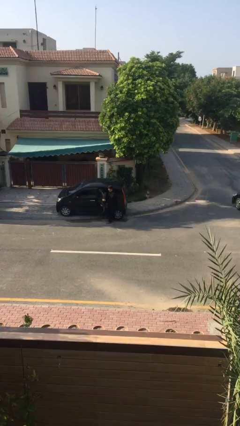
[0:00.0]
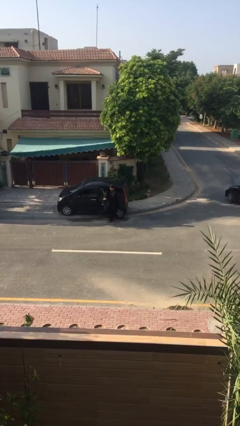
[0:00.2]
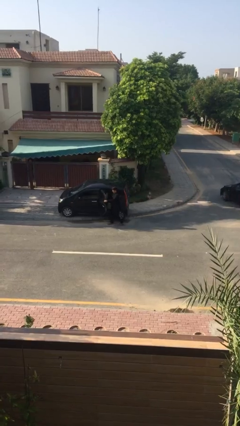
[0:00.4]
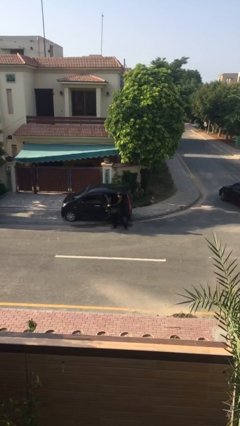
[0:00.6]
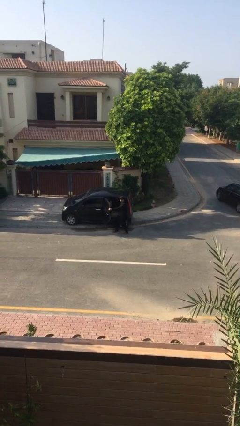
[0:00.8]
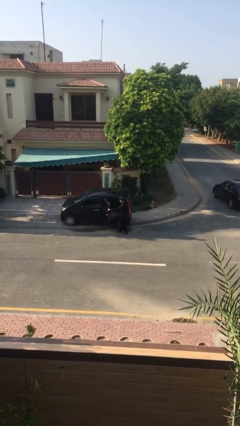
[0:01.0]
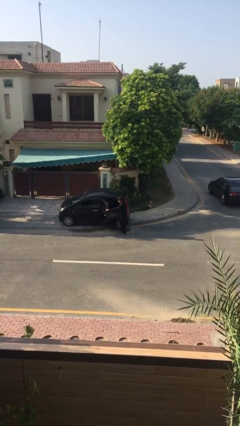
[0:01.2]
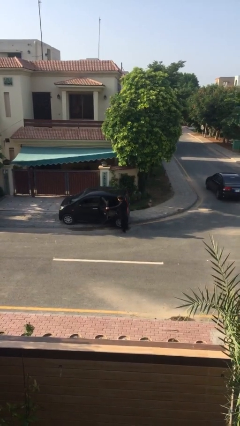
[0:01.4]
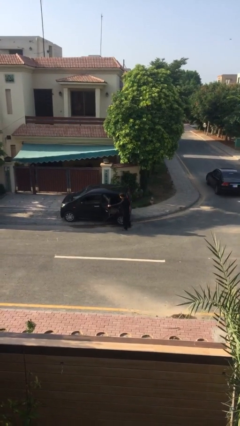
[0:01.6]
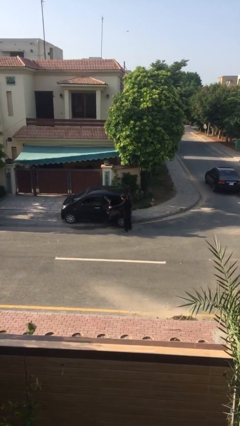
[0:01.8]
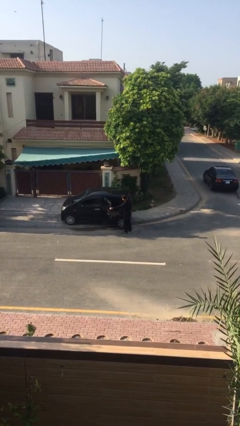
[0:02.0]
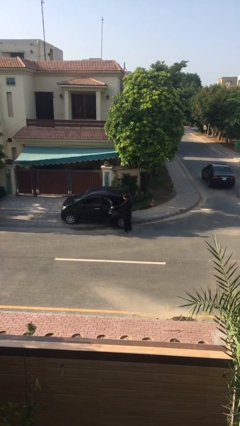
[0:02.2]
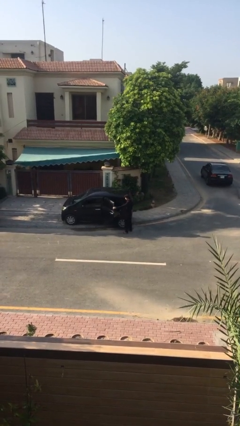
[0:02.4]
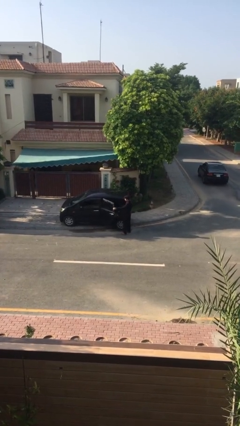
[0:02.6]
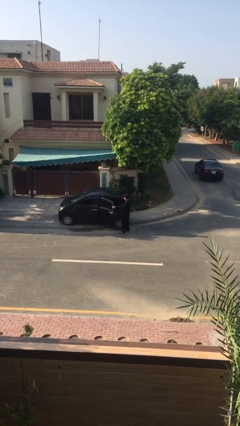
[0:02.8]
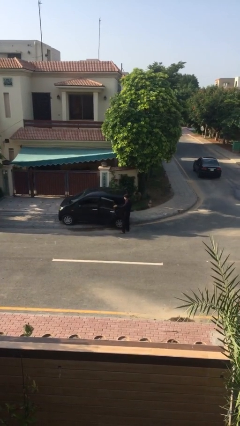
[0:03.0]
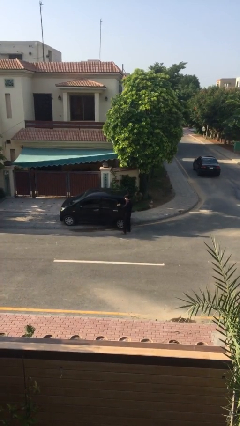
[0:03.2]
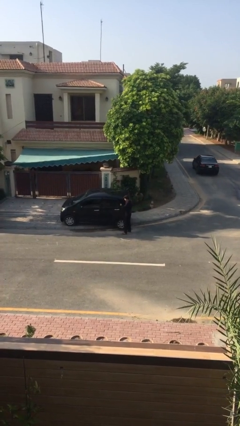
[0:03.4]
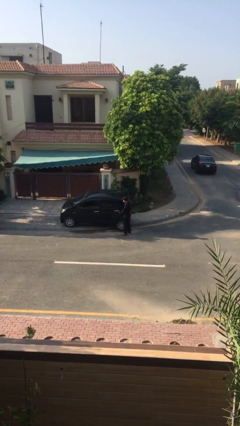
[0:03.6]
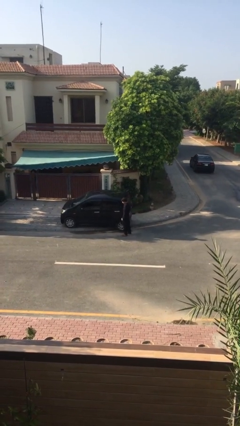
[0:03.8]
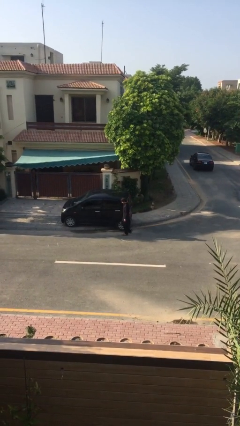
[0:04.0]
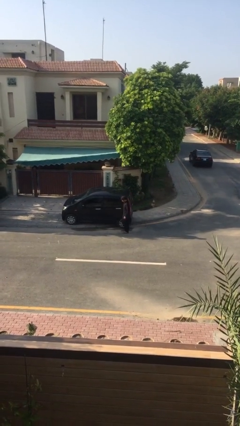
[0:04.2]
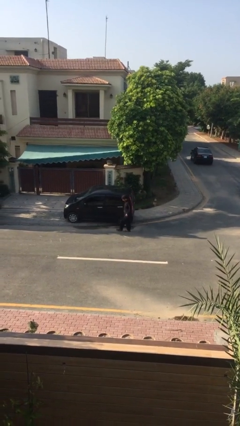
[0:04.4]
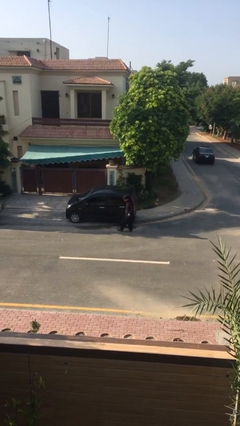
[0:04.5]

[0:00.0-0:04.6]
person closes car door

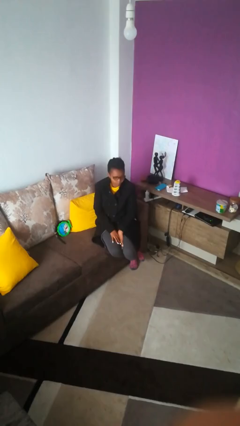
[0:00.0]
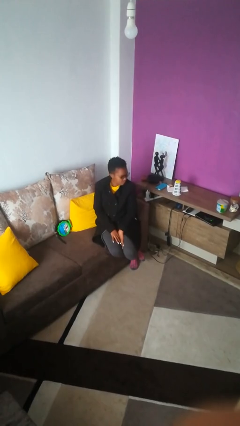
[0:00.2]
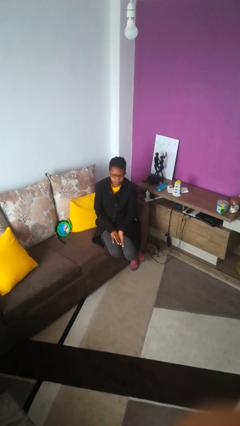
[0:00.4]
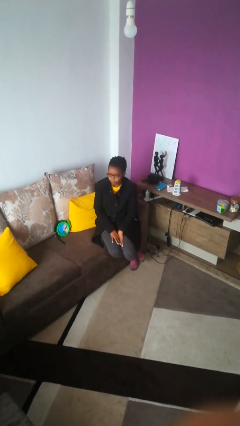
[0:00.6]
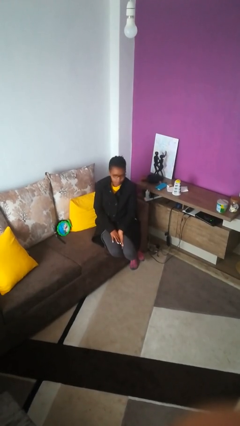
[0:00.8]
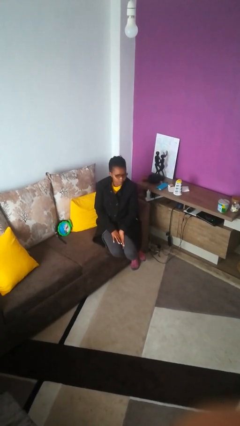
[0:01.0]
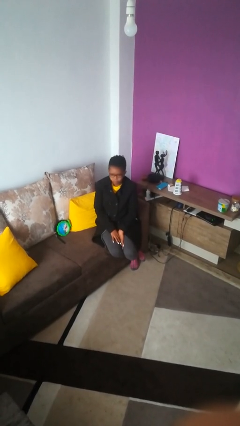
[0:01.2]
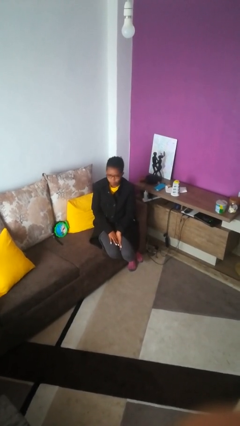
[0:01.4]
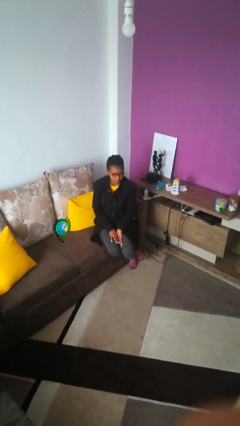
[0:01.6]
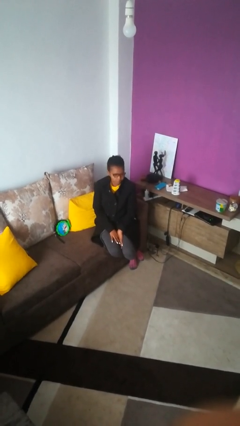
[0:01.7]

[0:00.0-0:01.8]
person shakes head

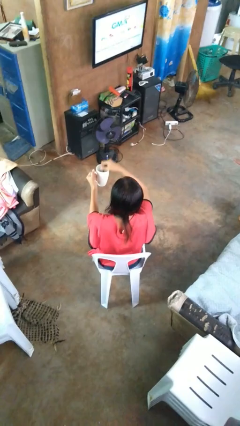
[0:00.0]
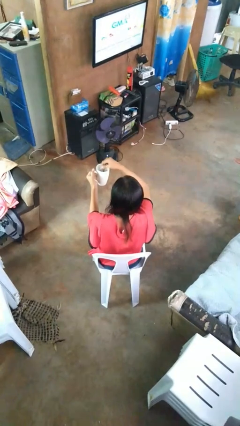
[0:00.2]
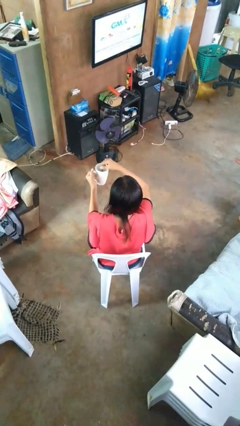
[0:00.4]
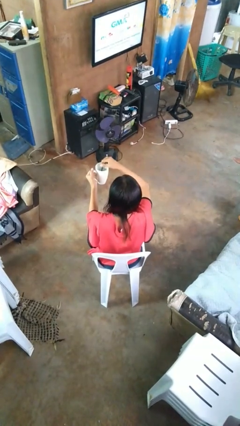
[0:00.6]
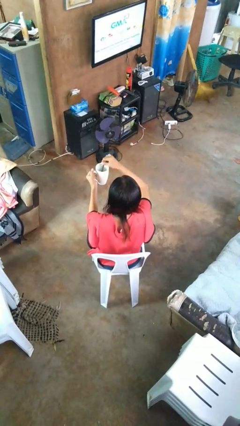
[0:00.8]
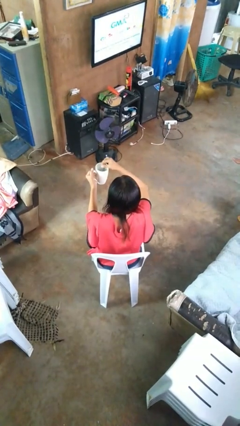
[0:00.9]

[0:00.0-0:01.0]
person stirs mug

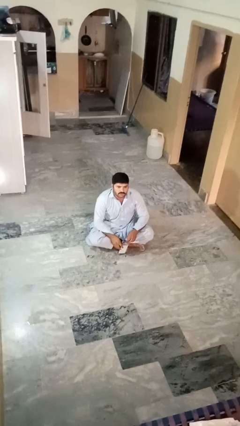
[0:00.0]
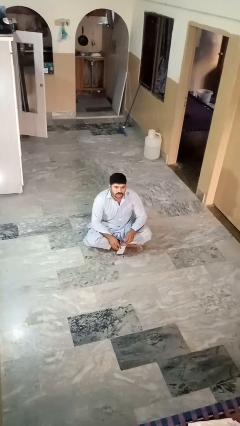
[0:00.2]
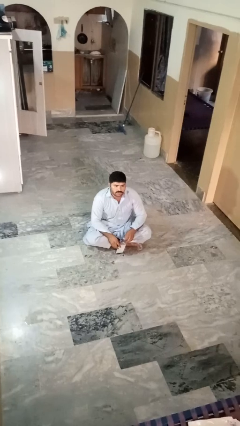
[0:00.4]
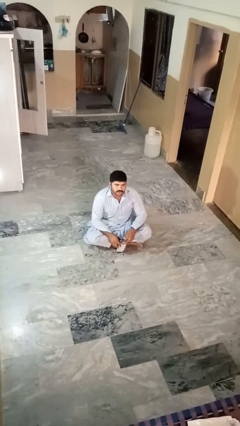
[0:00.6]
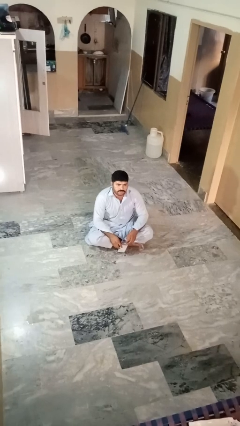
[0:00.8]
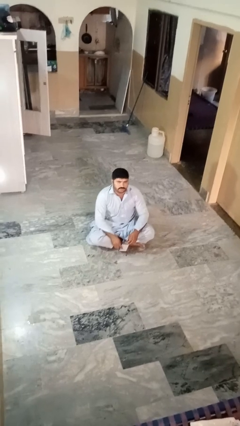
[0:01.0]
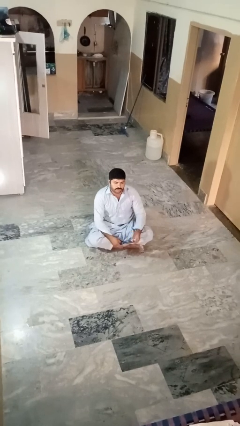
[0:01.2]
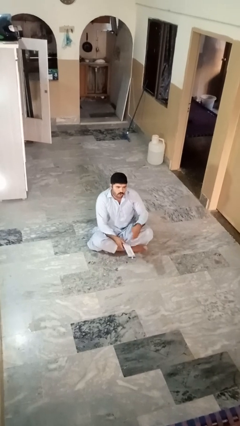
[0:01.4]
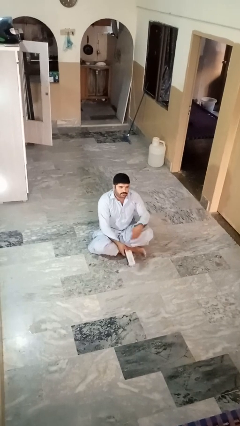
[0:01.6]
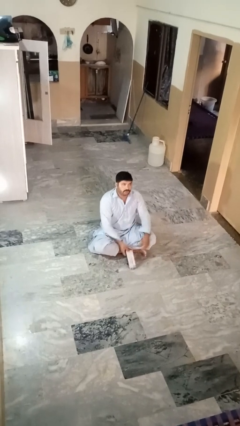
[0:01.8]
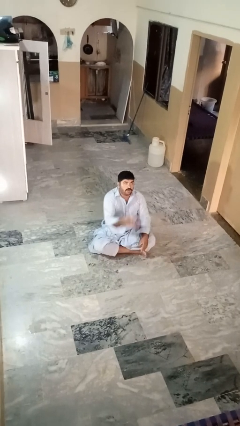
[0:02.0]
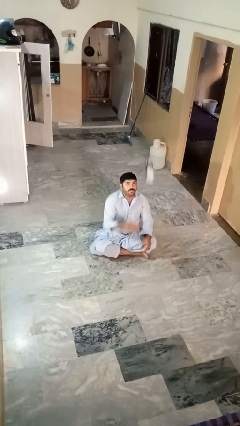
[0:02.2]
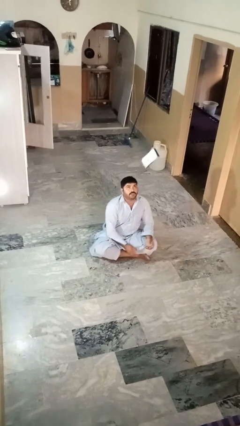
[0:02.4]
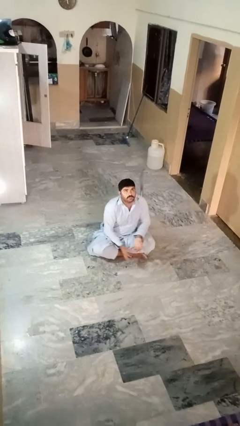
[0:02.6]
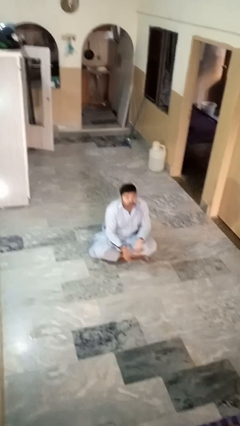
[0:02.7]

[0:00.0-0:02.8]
person drops object

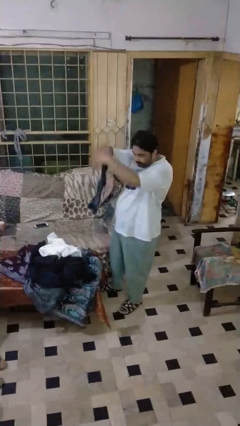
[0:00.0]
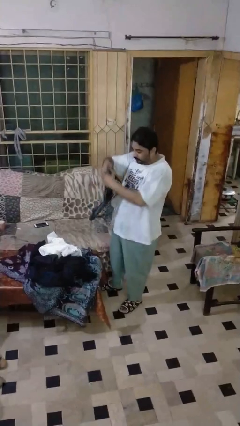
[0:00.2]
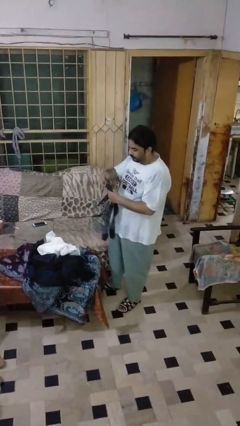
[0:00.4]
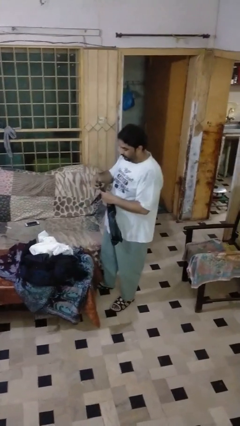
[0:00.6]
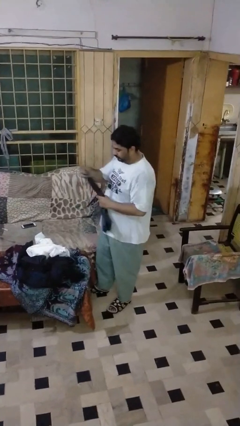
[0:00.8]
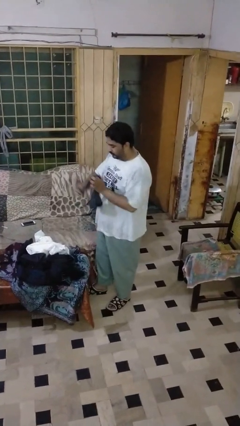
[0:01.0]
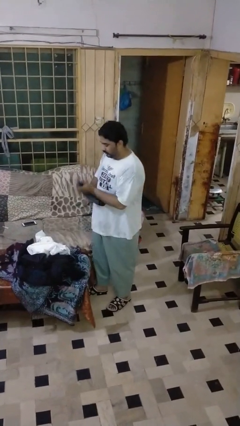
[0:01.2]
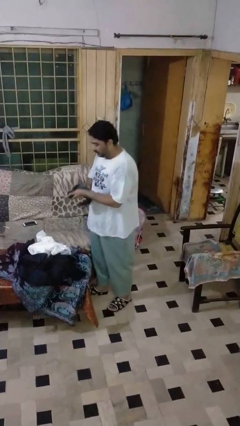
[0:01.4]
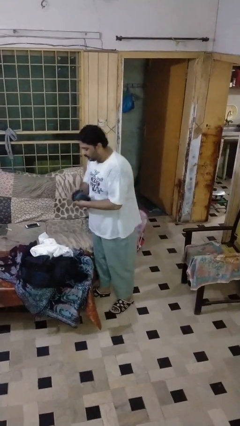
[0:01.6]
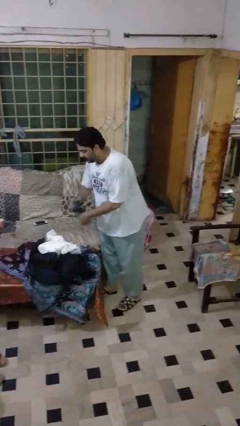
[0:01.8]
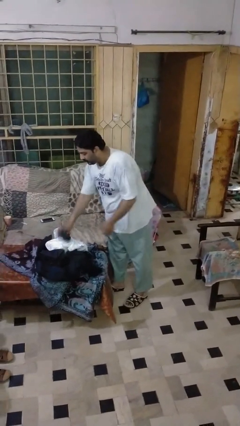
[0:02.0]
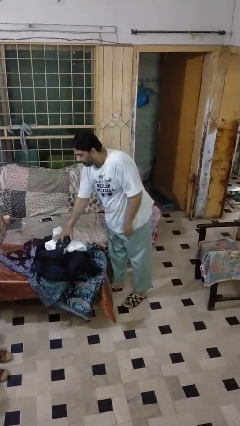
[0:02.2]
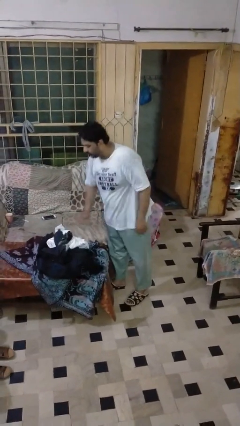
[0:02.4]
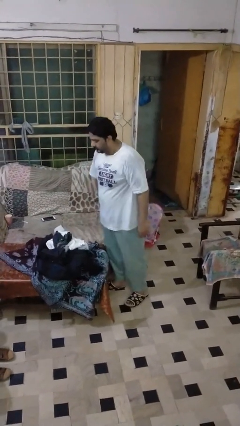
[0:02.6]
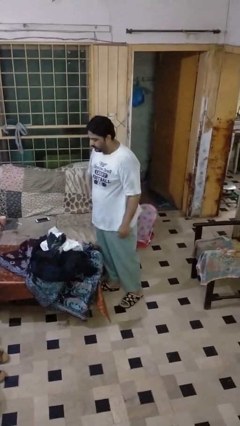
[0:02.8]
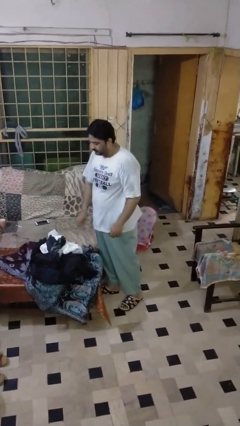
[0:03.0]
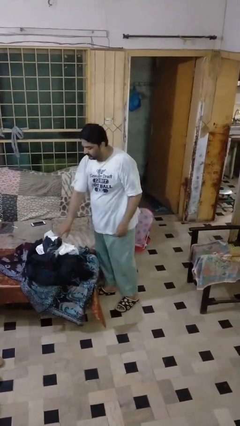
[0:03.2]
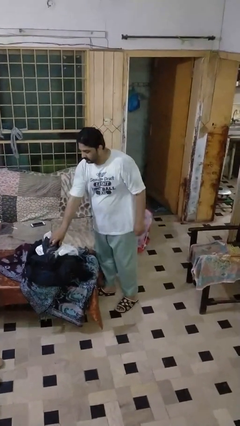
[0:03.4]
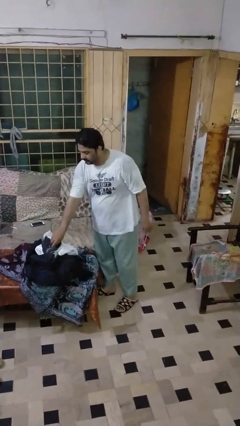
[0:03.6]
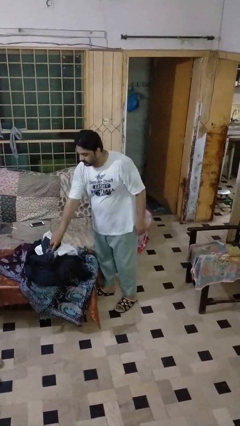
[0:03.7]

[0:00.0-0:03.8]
person folds socks

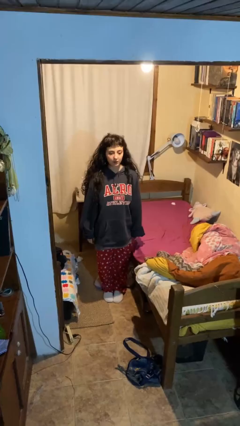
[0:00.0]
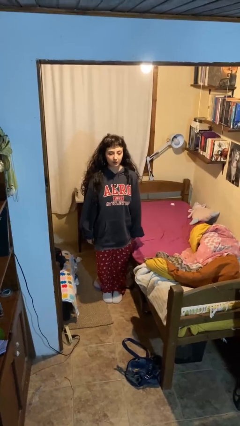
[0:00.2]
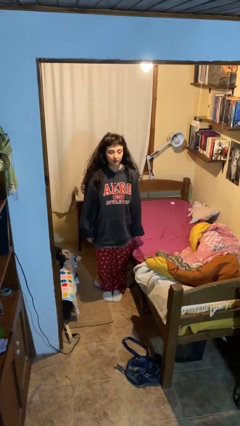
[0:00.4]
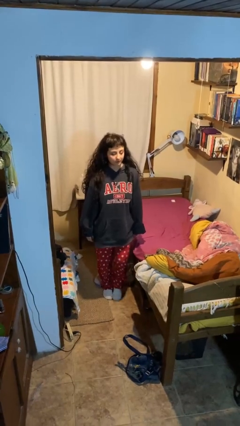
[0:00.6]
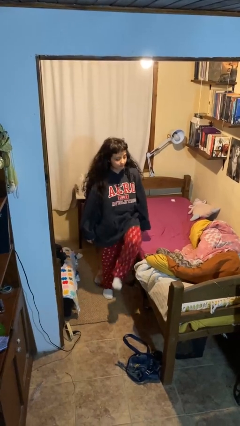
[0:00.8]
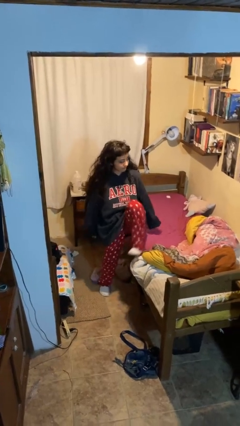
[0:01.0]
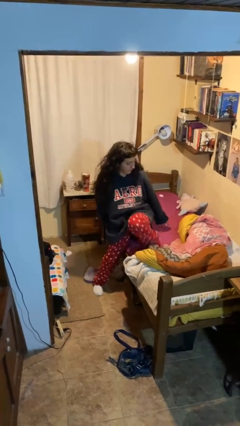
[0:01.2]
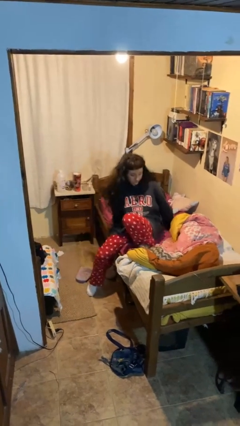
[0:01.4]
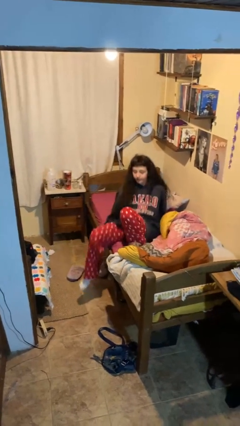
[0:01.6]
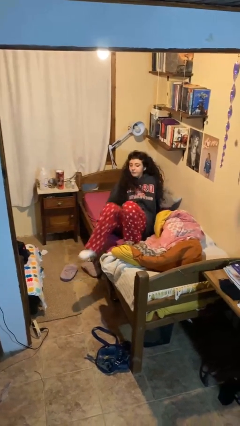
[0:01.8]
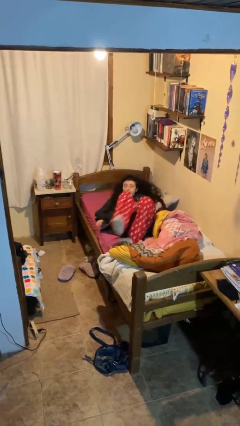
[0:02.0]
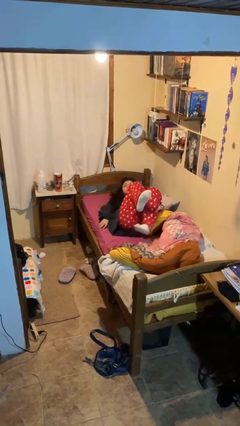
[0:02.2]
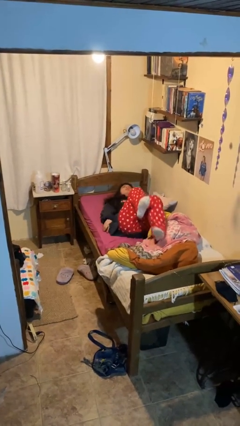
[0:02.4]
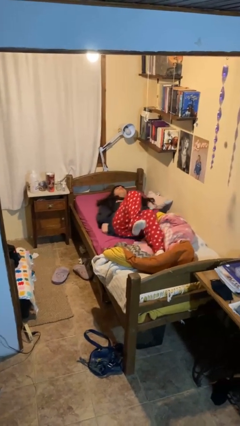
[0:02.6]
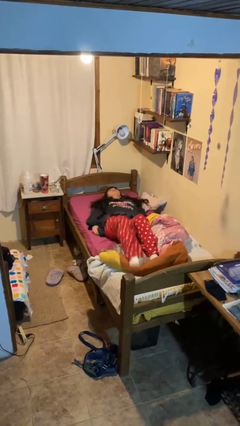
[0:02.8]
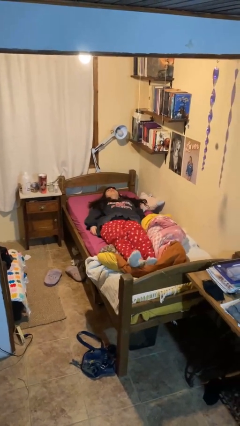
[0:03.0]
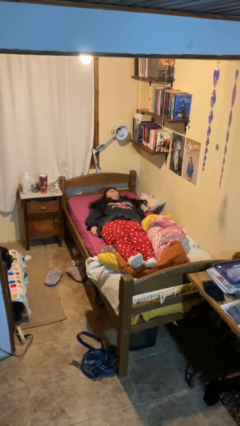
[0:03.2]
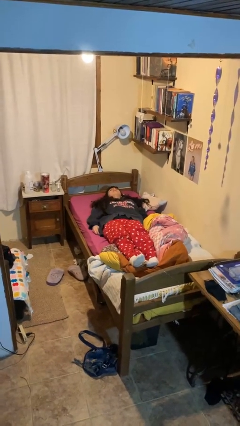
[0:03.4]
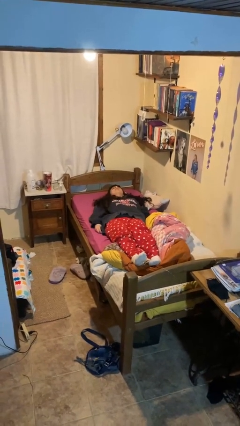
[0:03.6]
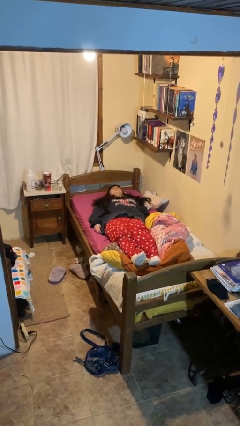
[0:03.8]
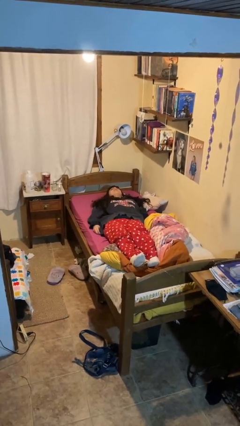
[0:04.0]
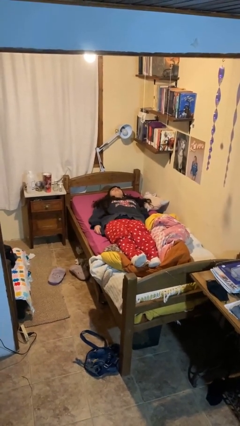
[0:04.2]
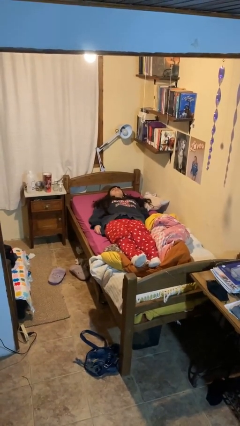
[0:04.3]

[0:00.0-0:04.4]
person lies down on bed
